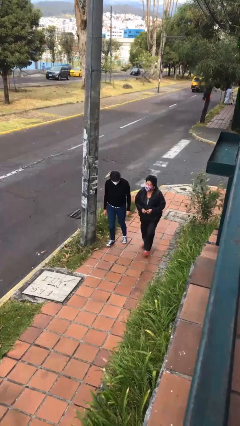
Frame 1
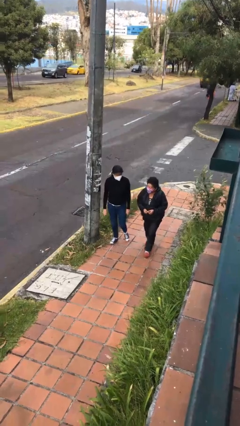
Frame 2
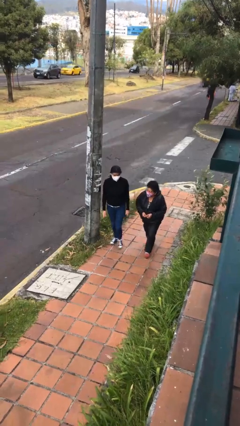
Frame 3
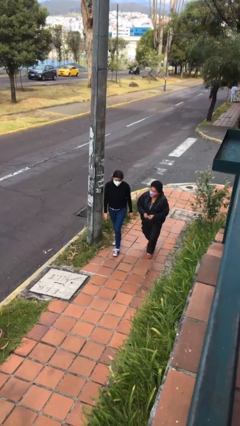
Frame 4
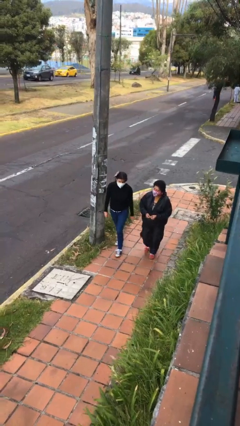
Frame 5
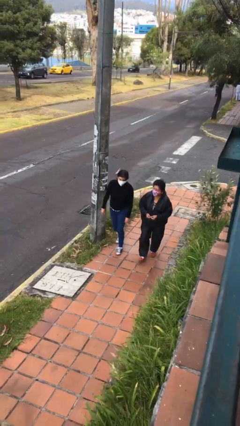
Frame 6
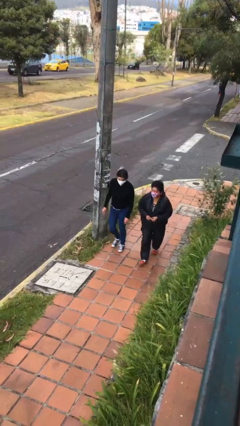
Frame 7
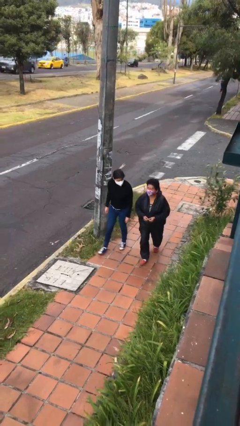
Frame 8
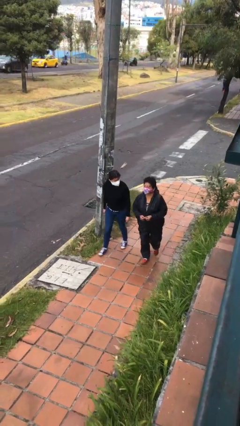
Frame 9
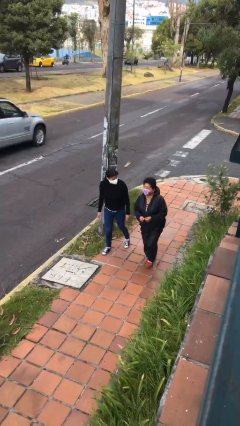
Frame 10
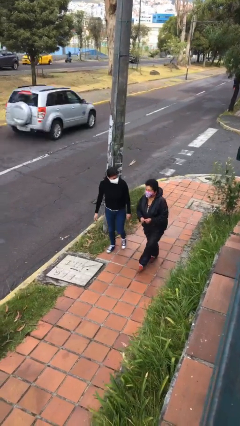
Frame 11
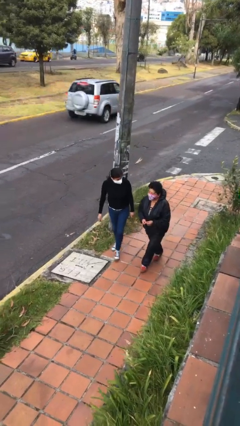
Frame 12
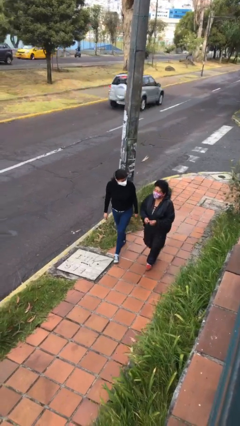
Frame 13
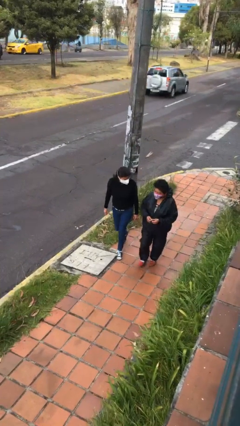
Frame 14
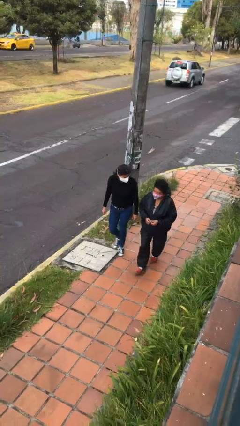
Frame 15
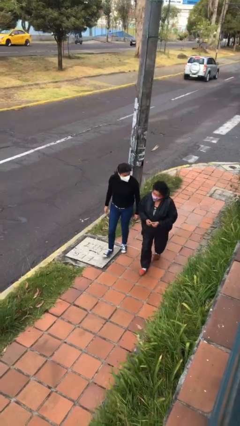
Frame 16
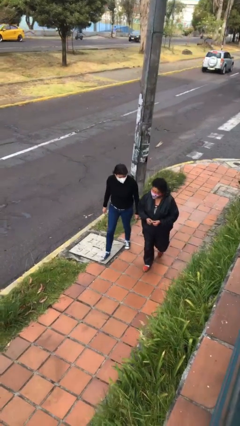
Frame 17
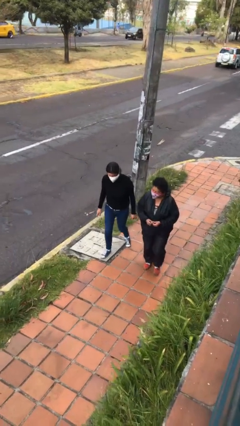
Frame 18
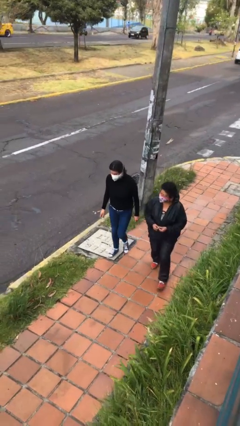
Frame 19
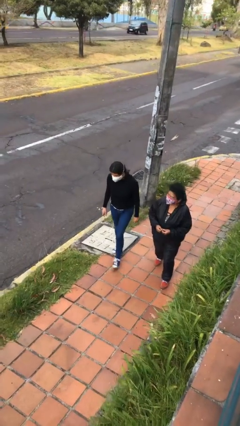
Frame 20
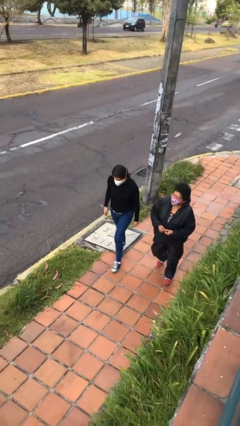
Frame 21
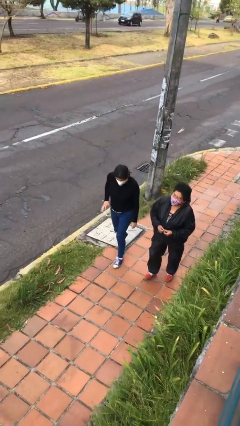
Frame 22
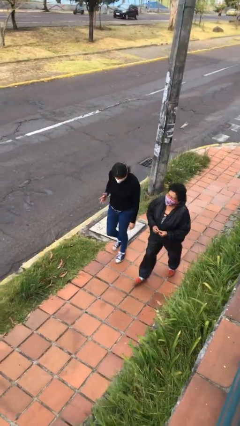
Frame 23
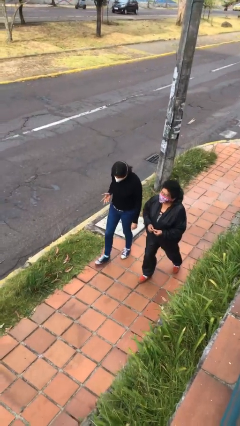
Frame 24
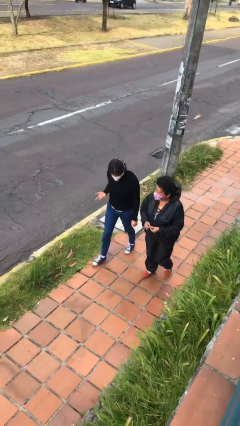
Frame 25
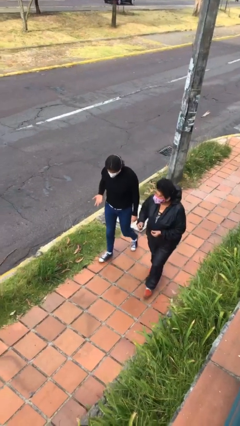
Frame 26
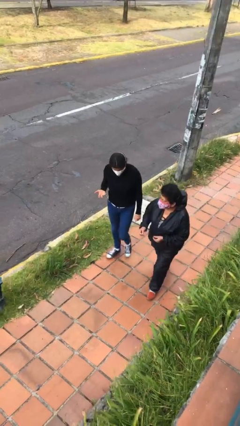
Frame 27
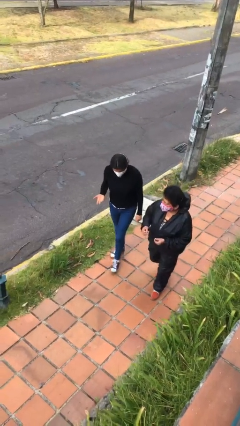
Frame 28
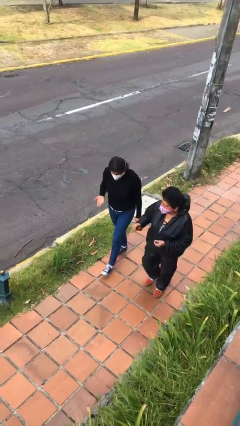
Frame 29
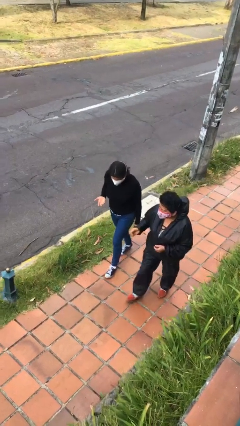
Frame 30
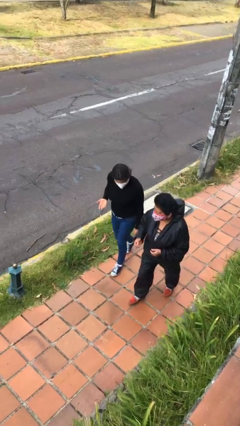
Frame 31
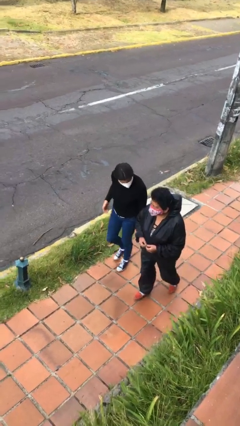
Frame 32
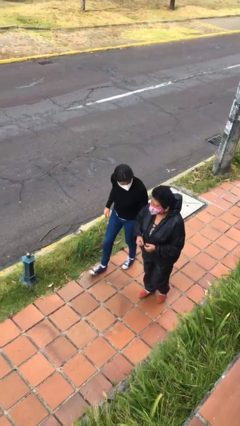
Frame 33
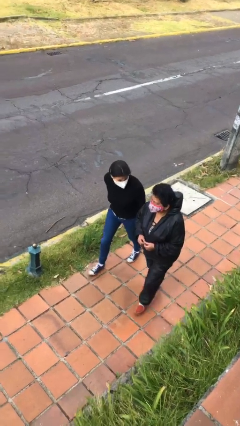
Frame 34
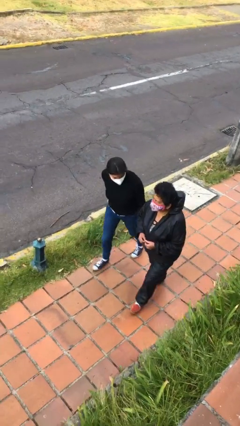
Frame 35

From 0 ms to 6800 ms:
person talks to person

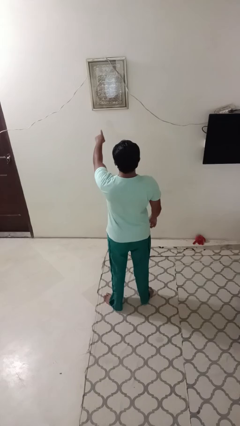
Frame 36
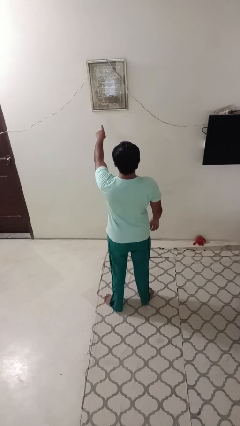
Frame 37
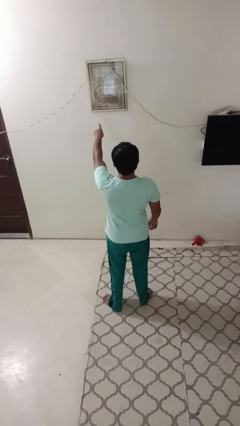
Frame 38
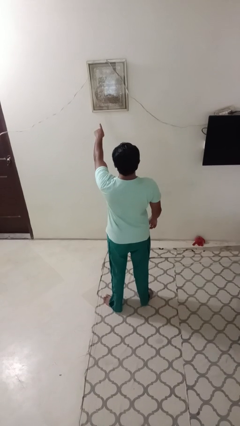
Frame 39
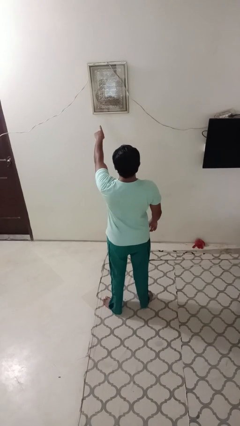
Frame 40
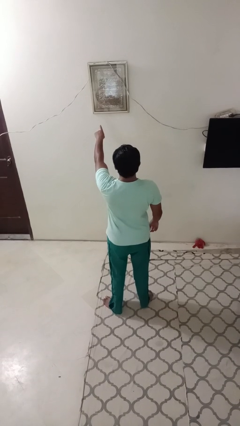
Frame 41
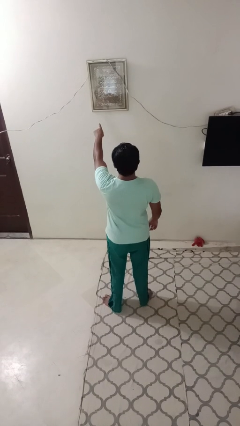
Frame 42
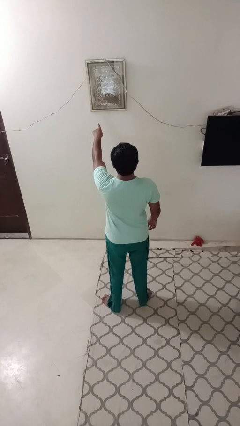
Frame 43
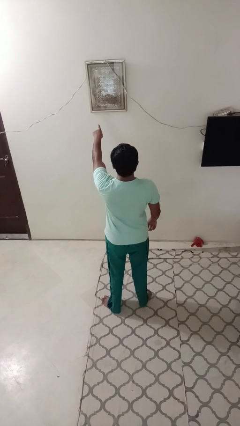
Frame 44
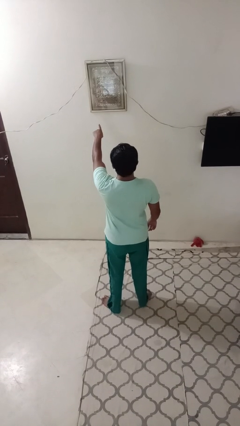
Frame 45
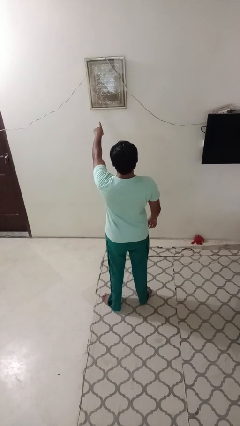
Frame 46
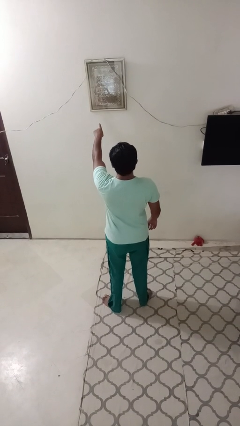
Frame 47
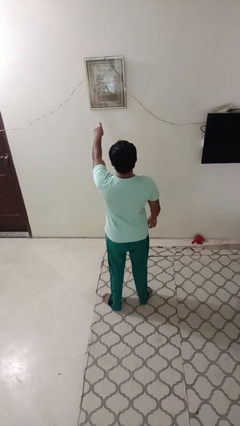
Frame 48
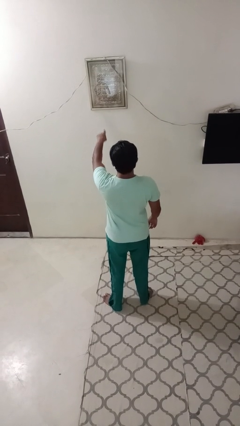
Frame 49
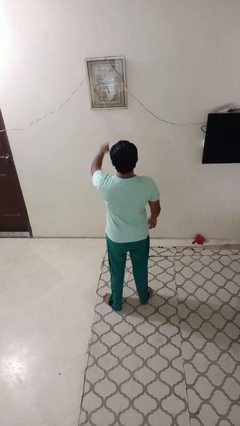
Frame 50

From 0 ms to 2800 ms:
person points at person

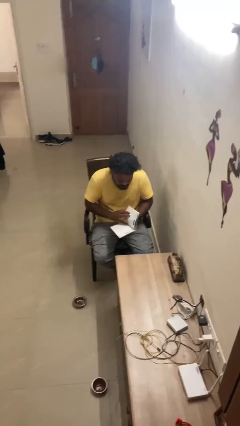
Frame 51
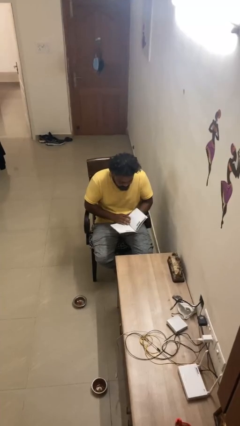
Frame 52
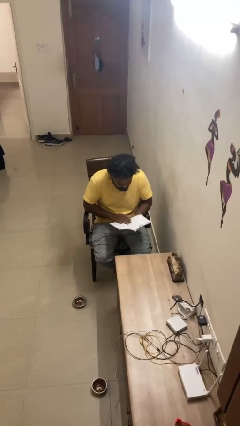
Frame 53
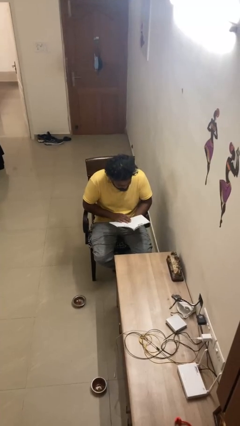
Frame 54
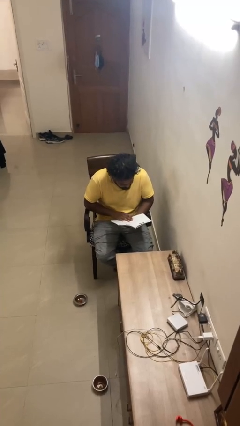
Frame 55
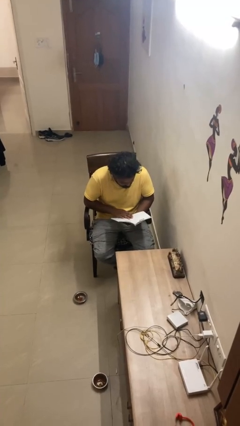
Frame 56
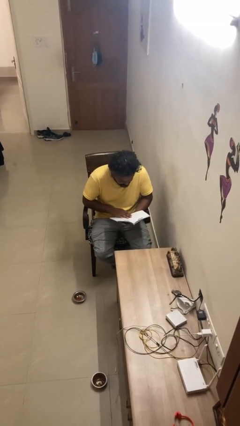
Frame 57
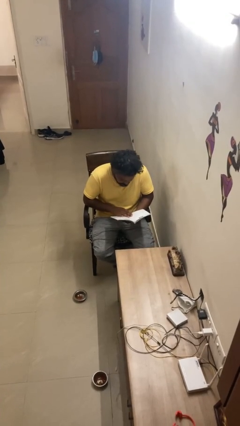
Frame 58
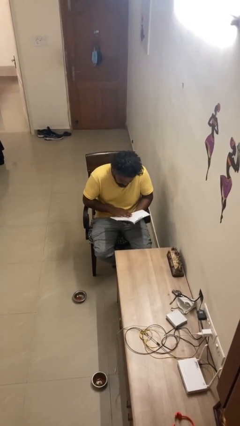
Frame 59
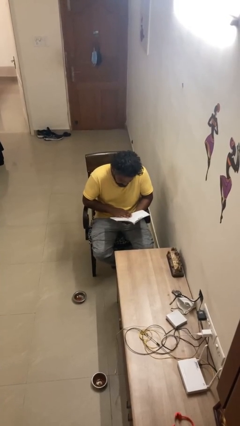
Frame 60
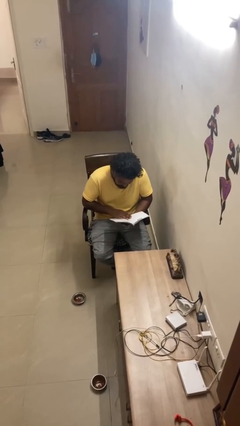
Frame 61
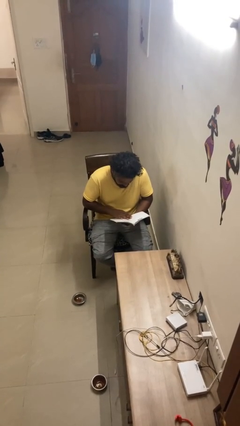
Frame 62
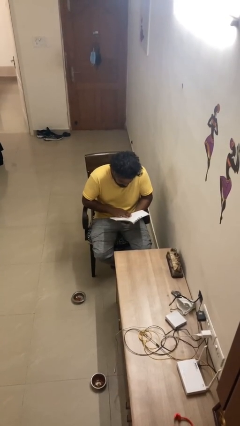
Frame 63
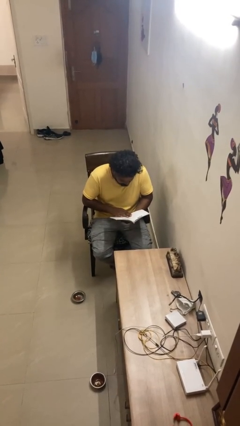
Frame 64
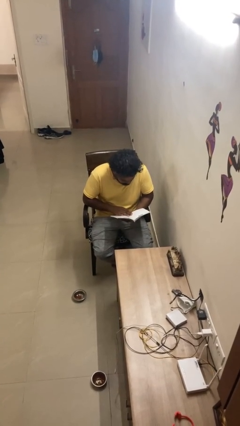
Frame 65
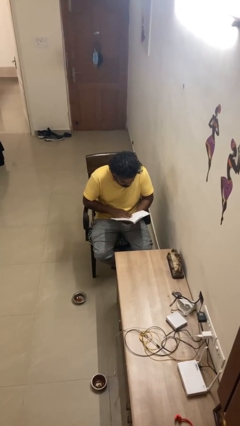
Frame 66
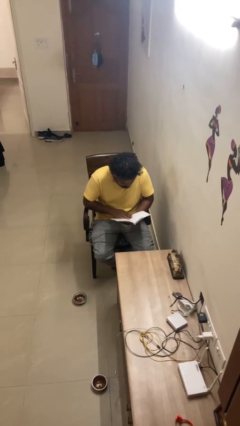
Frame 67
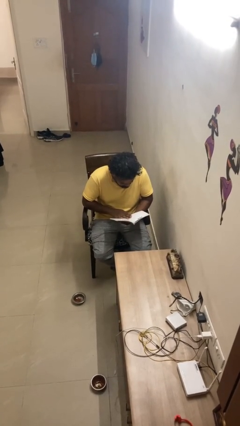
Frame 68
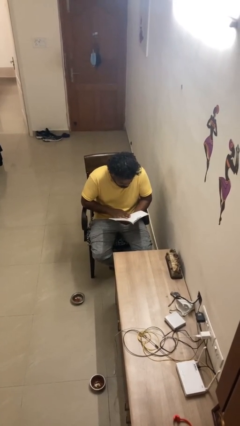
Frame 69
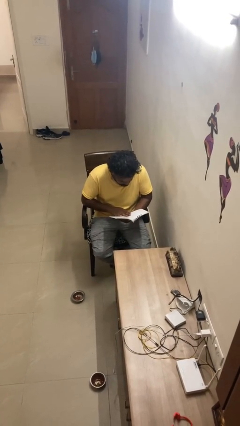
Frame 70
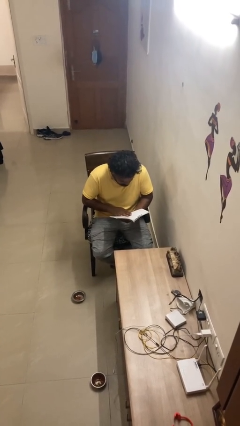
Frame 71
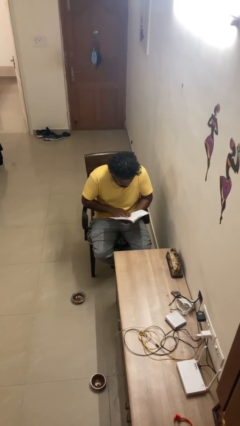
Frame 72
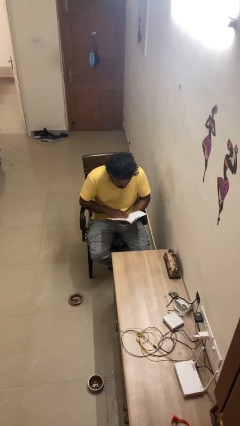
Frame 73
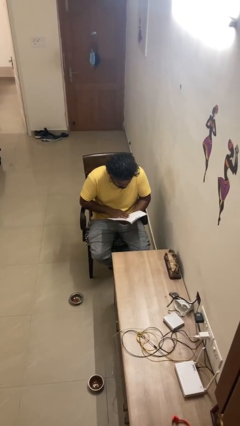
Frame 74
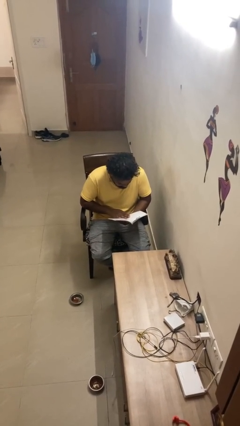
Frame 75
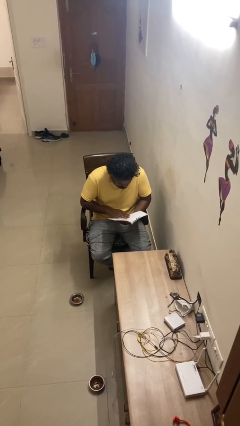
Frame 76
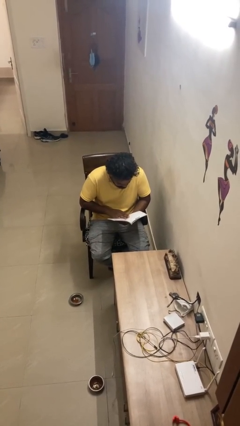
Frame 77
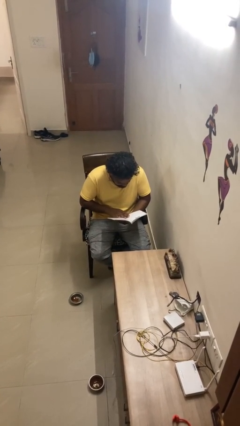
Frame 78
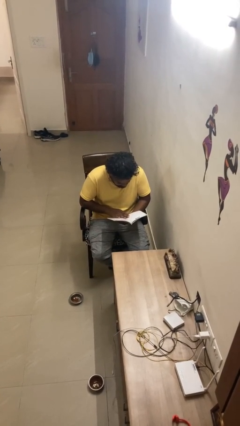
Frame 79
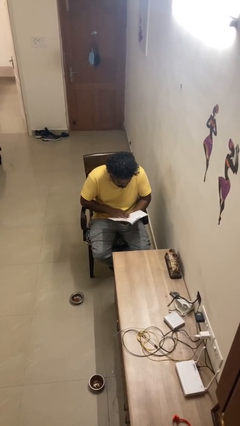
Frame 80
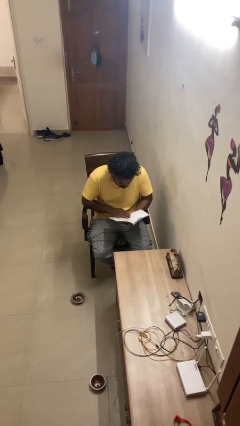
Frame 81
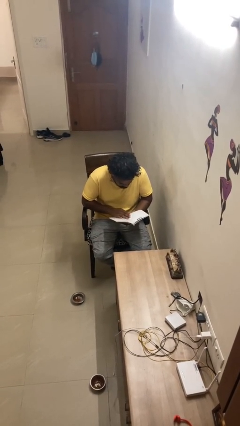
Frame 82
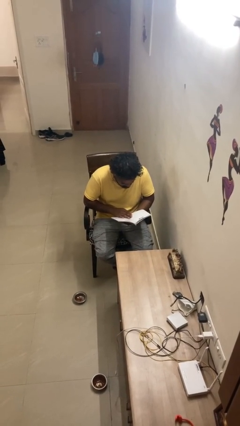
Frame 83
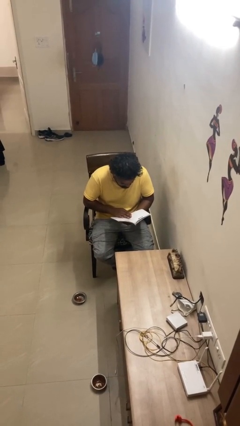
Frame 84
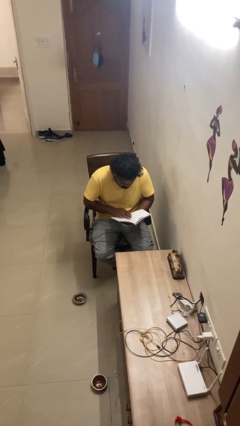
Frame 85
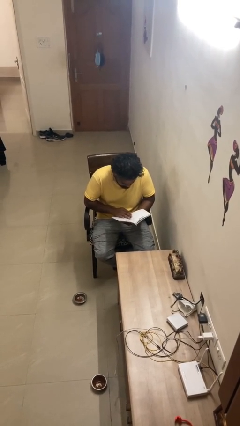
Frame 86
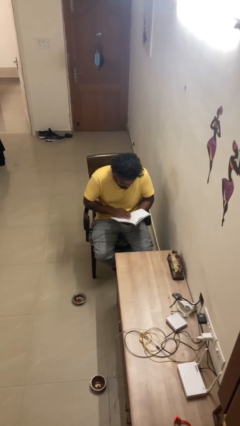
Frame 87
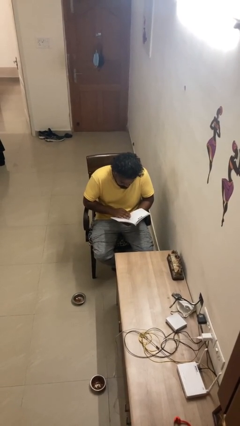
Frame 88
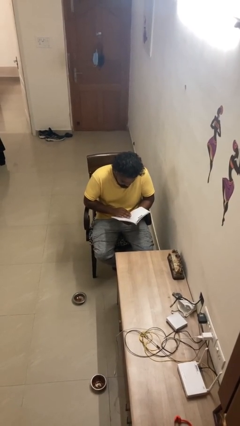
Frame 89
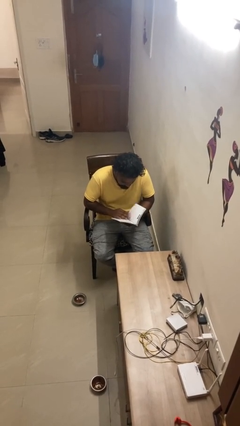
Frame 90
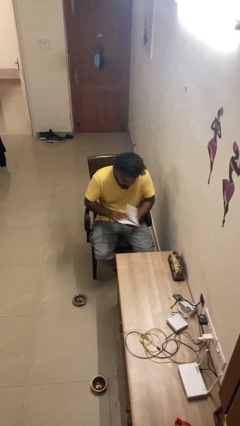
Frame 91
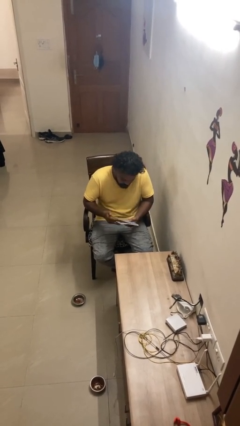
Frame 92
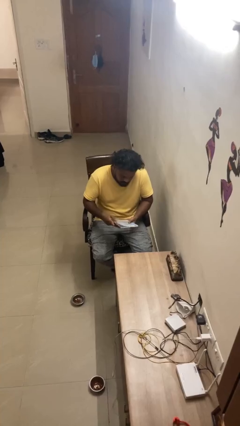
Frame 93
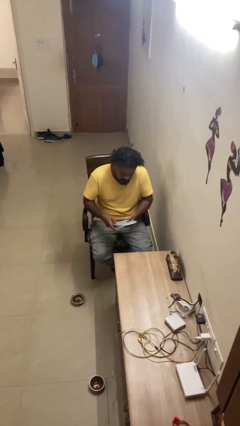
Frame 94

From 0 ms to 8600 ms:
person reads document

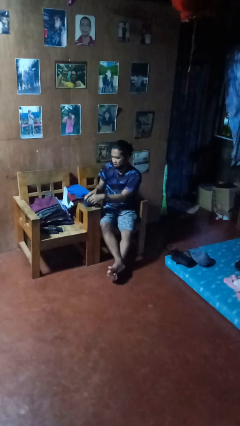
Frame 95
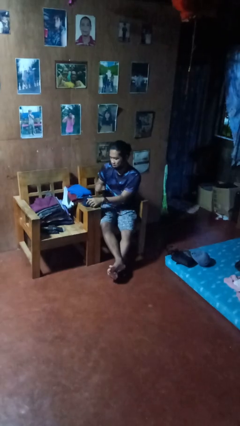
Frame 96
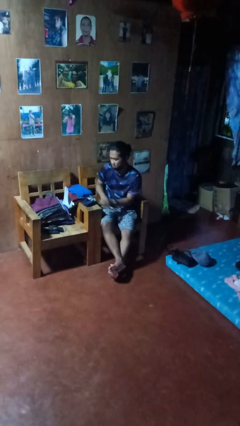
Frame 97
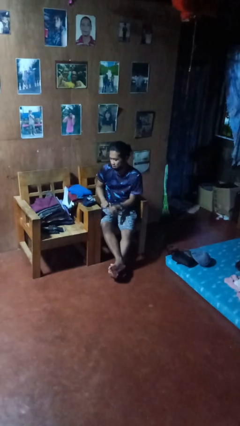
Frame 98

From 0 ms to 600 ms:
person folds socks
